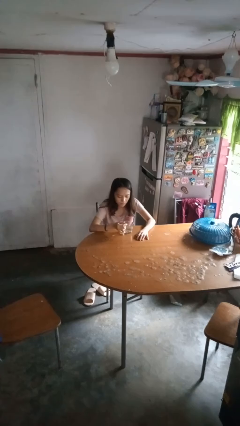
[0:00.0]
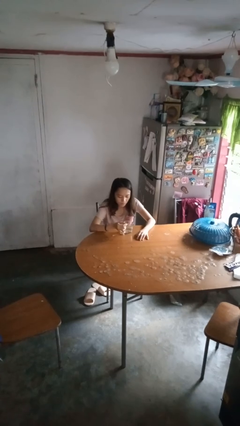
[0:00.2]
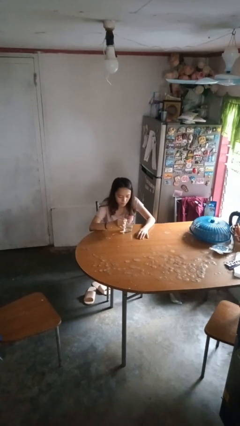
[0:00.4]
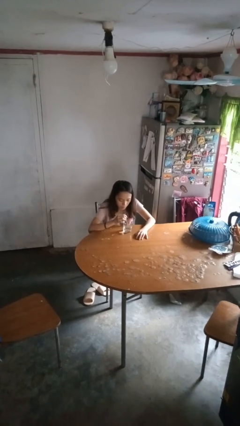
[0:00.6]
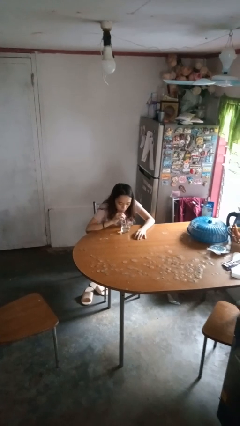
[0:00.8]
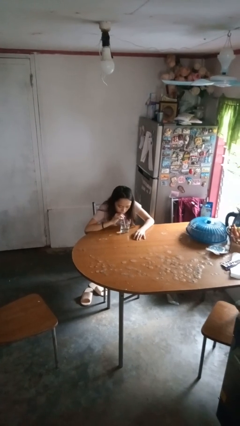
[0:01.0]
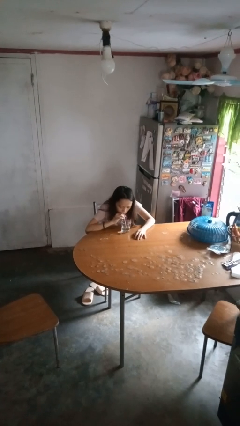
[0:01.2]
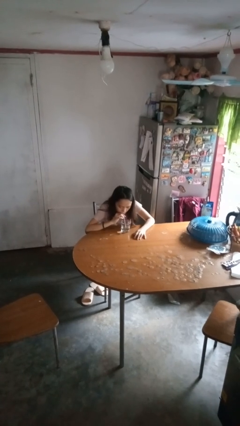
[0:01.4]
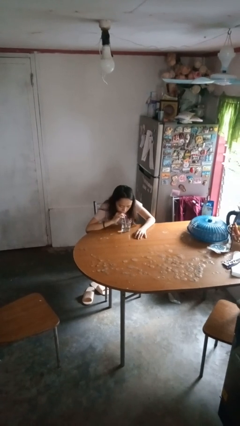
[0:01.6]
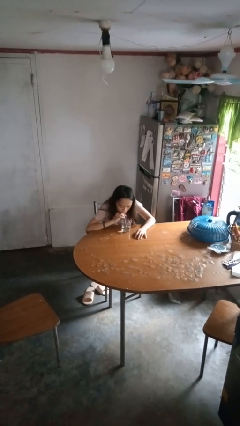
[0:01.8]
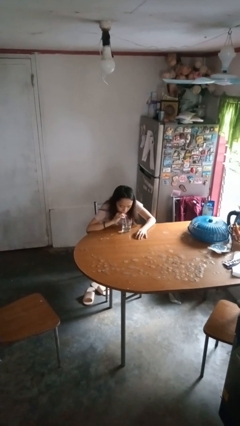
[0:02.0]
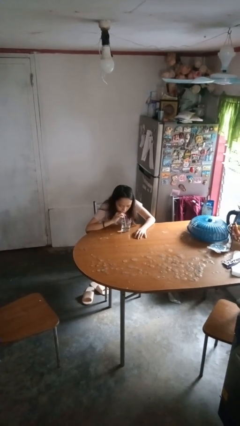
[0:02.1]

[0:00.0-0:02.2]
person drinks from straw

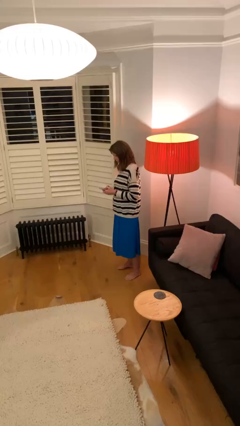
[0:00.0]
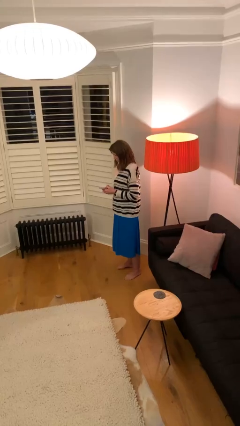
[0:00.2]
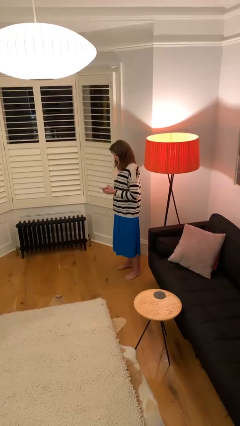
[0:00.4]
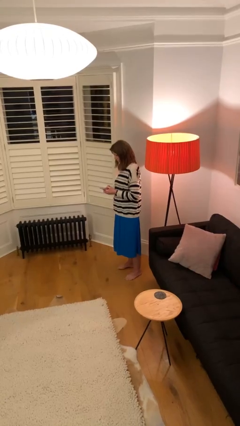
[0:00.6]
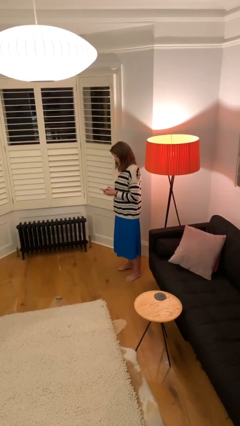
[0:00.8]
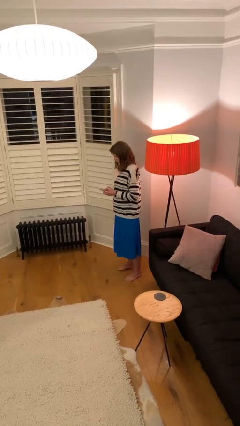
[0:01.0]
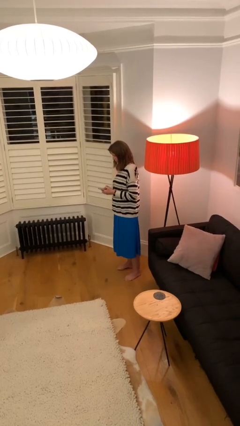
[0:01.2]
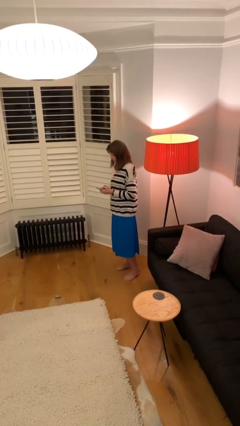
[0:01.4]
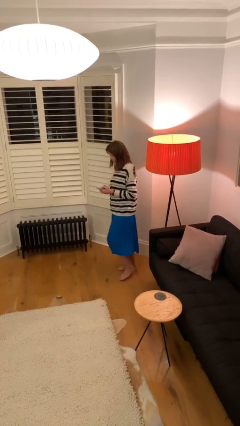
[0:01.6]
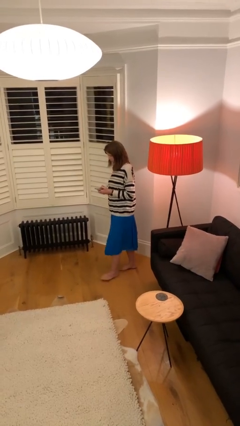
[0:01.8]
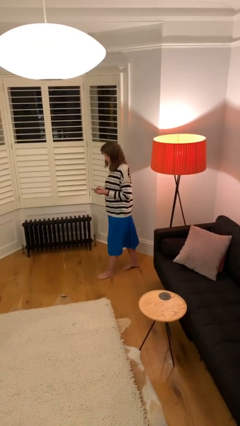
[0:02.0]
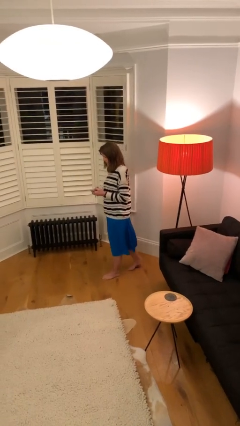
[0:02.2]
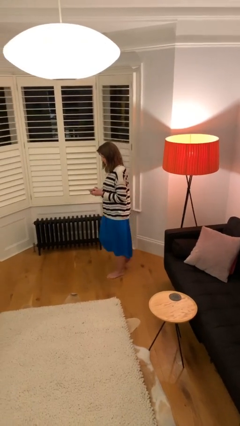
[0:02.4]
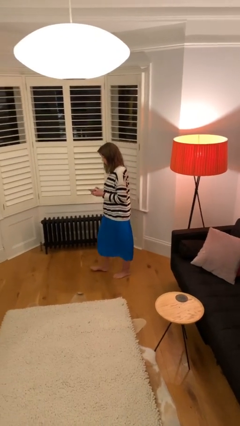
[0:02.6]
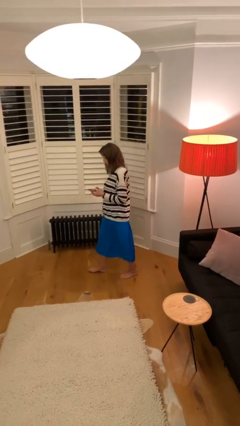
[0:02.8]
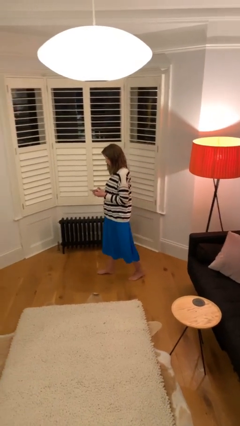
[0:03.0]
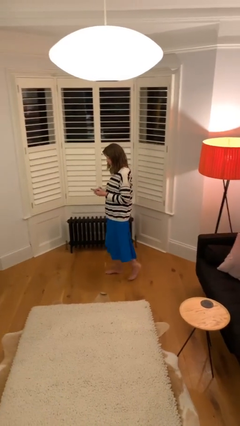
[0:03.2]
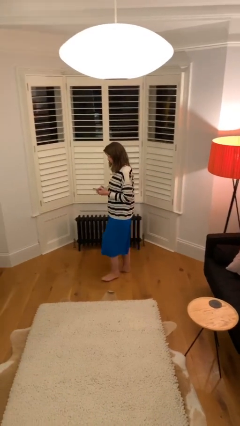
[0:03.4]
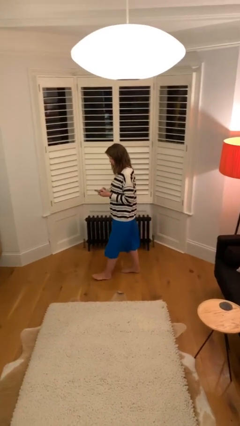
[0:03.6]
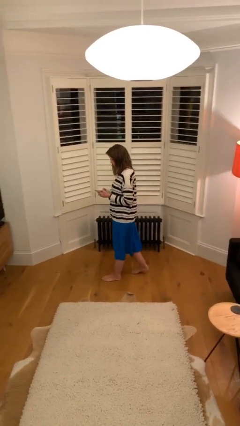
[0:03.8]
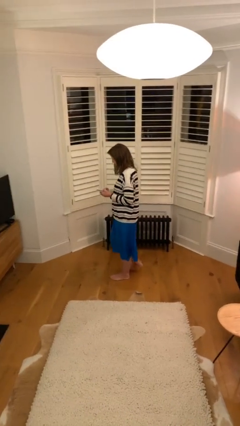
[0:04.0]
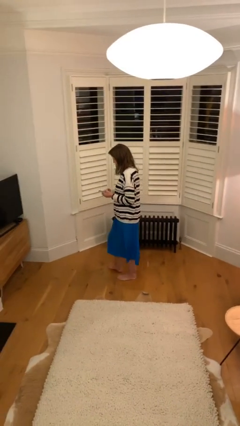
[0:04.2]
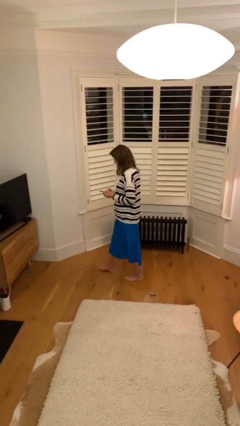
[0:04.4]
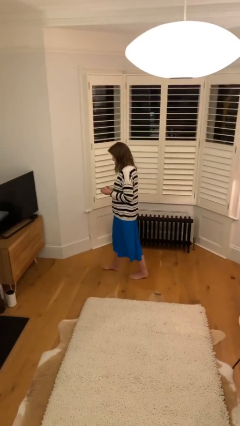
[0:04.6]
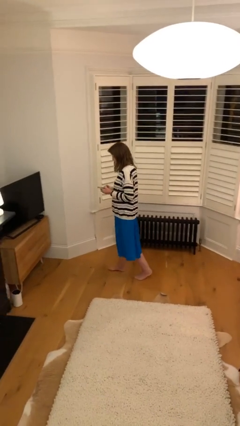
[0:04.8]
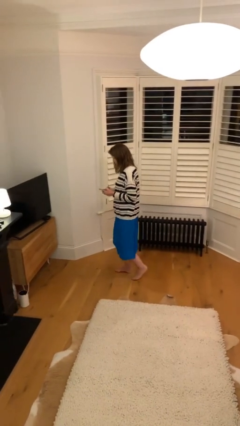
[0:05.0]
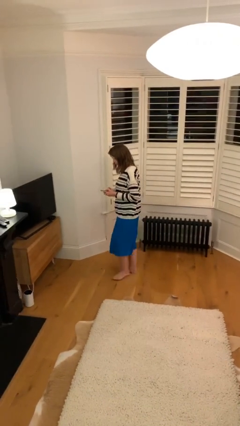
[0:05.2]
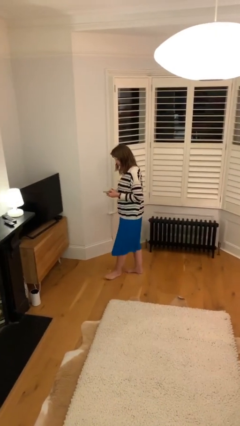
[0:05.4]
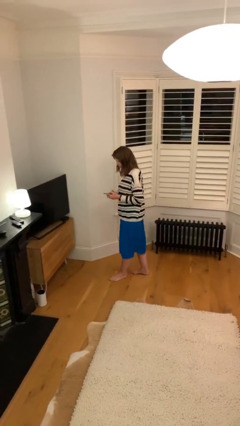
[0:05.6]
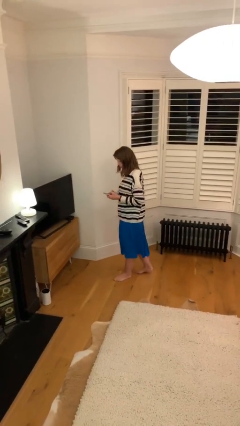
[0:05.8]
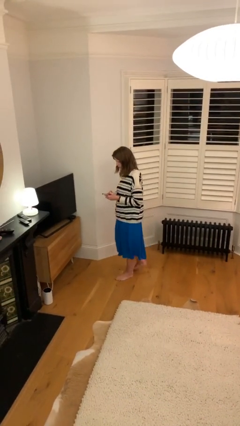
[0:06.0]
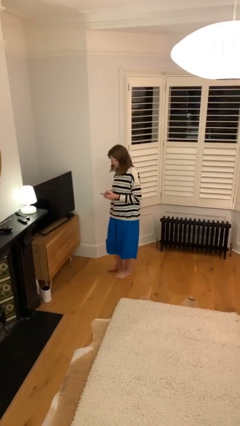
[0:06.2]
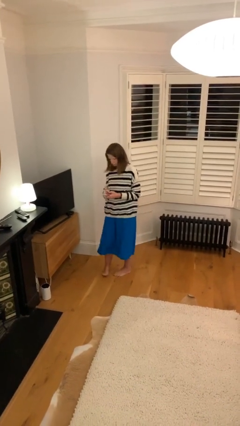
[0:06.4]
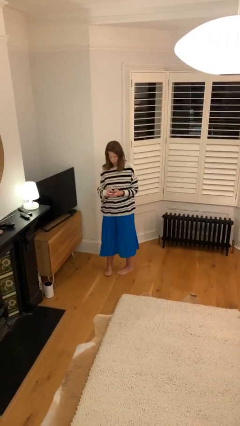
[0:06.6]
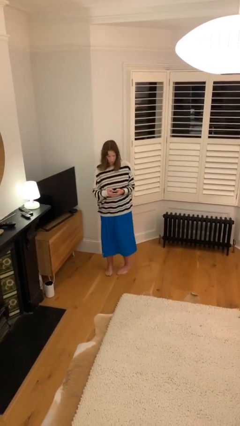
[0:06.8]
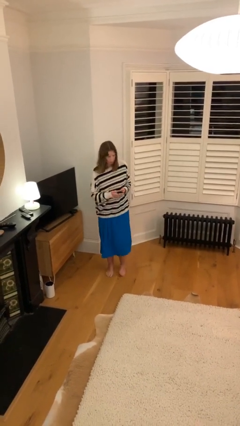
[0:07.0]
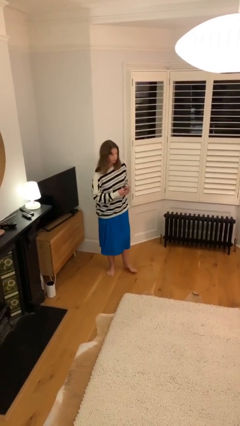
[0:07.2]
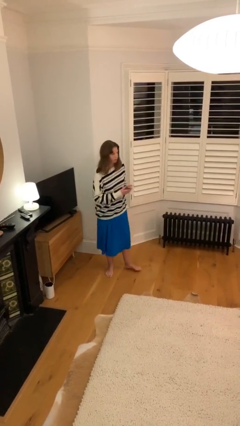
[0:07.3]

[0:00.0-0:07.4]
person texts on phone

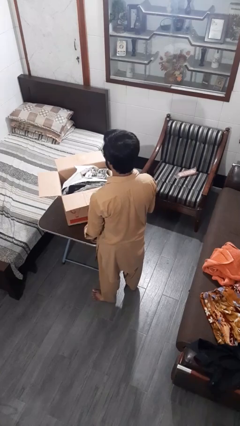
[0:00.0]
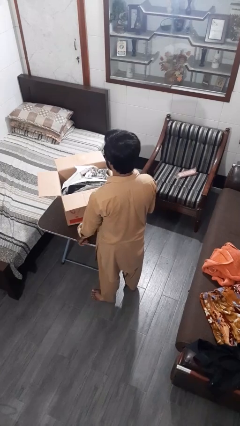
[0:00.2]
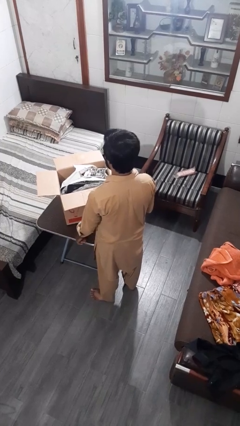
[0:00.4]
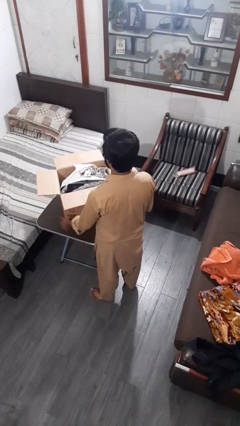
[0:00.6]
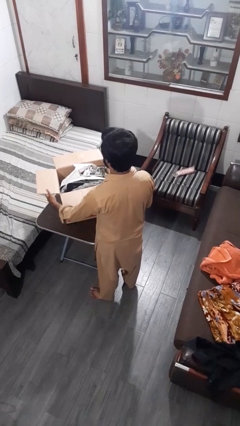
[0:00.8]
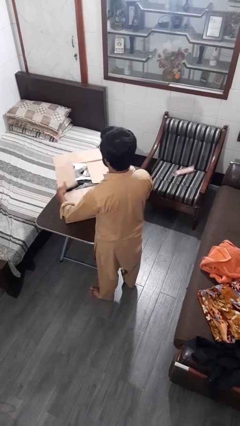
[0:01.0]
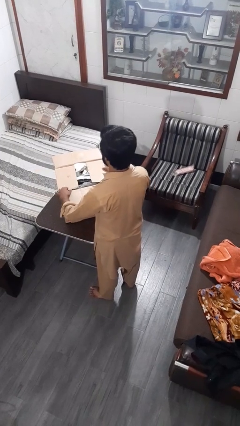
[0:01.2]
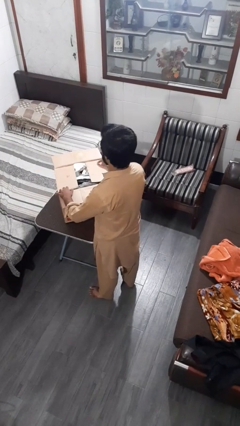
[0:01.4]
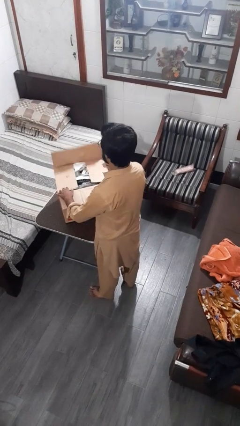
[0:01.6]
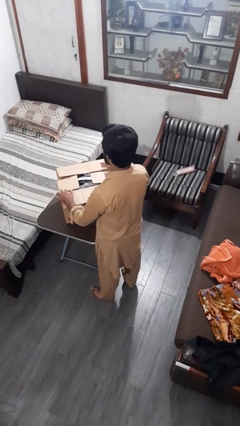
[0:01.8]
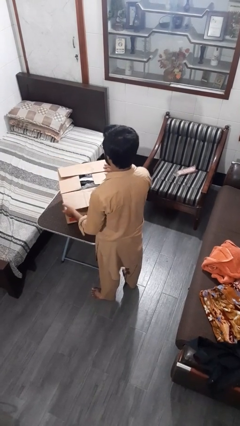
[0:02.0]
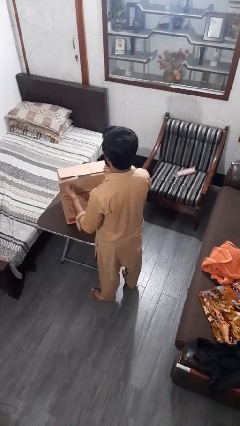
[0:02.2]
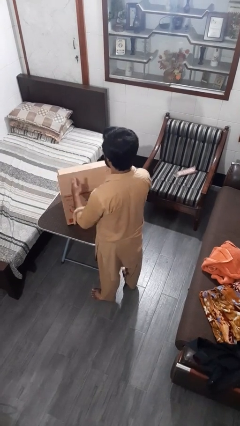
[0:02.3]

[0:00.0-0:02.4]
person closes box

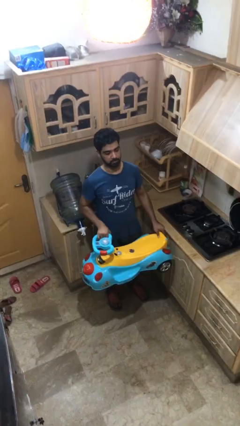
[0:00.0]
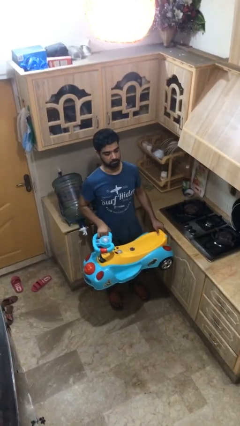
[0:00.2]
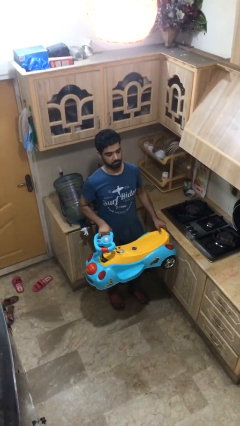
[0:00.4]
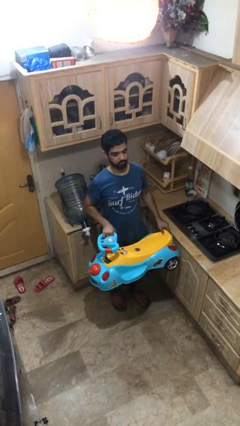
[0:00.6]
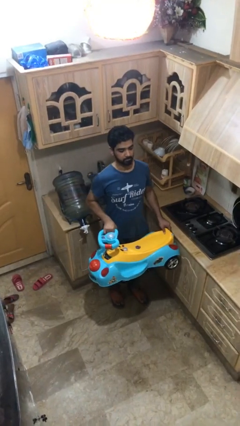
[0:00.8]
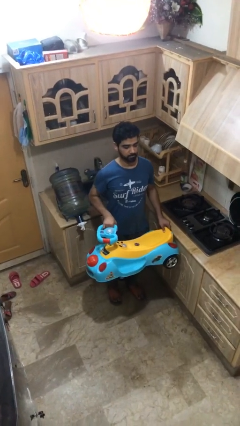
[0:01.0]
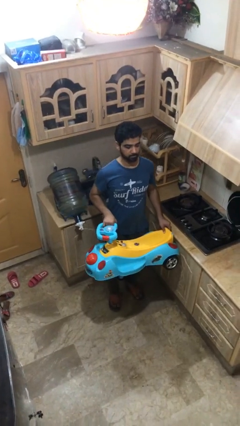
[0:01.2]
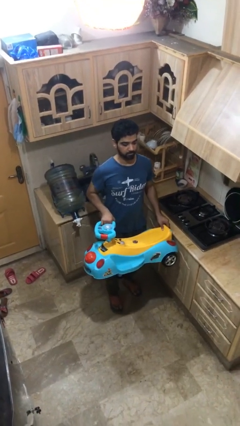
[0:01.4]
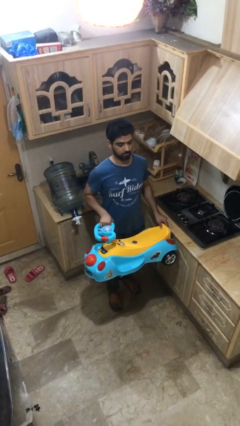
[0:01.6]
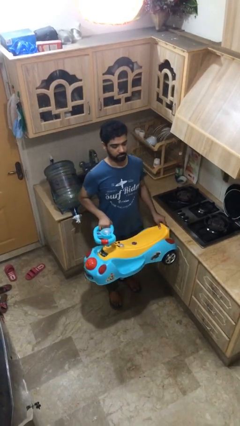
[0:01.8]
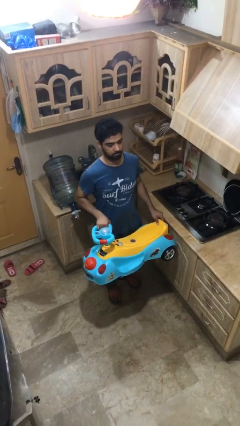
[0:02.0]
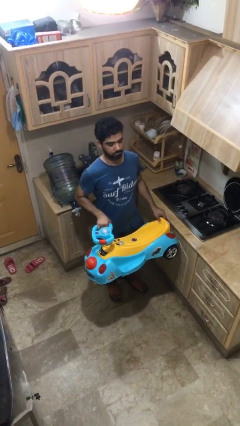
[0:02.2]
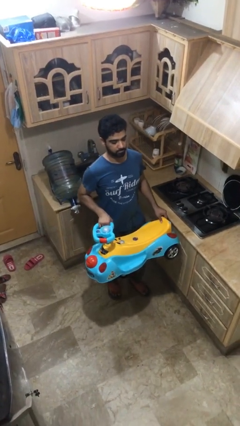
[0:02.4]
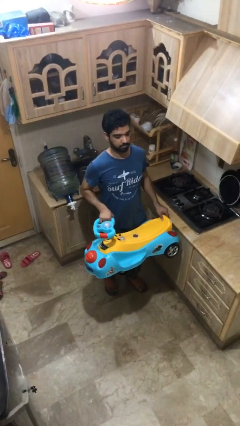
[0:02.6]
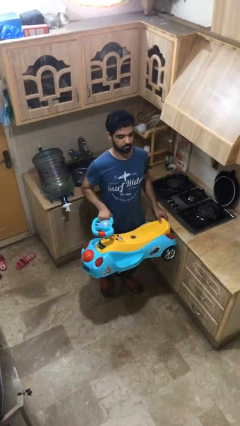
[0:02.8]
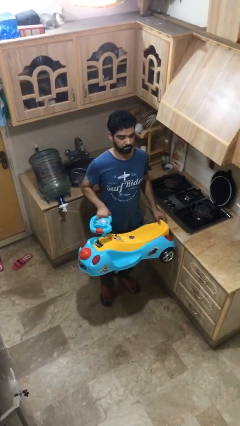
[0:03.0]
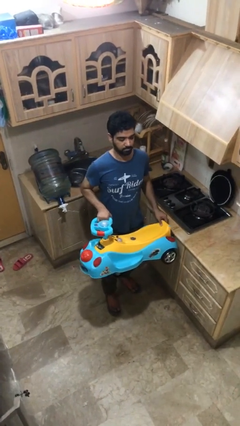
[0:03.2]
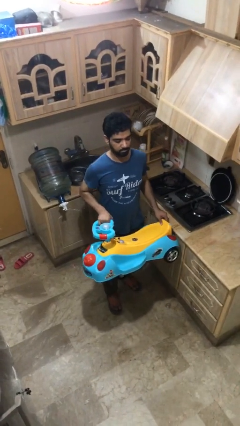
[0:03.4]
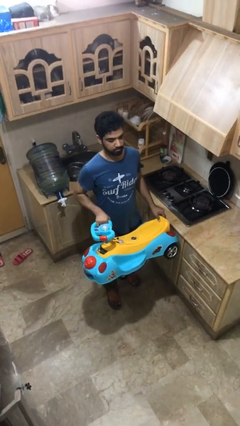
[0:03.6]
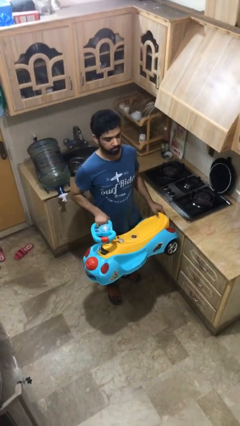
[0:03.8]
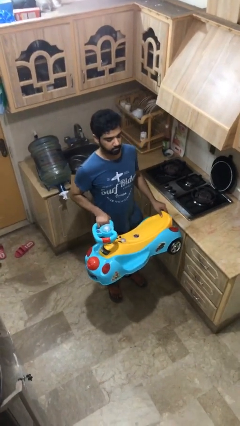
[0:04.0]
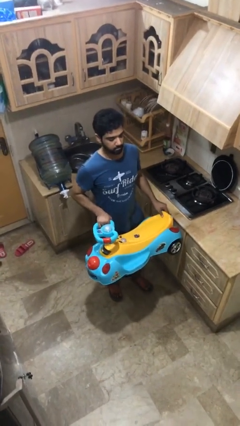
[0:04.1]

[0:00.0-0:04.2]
person carries heavy object

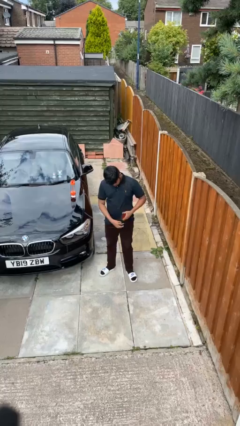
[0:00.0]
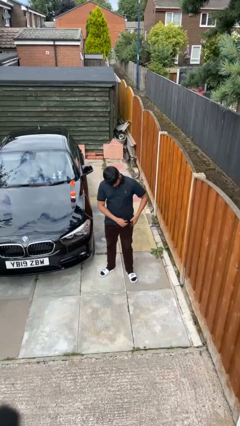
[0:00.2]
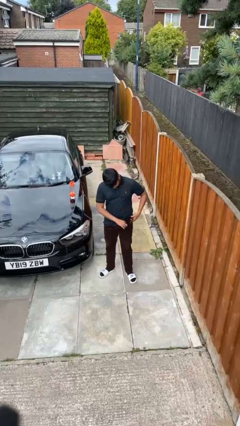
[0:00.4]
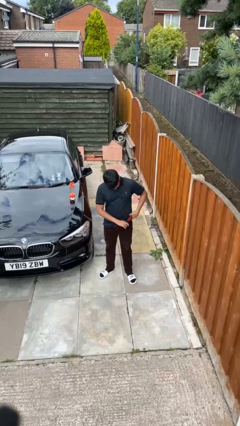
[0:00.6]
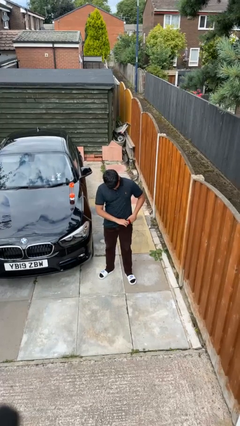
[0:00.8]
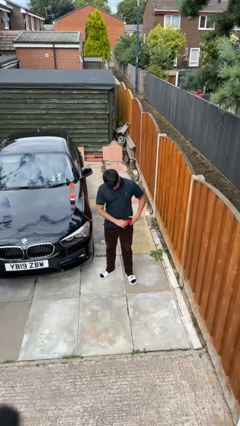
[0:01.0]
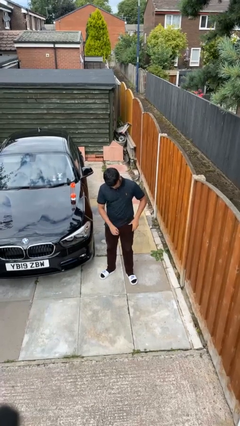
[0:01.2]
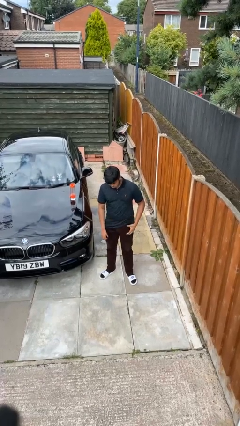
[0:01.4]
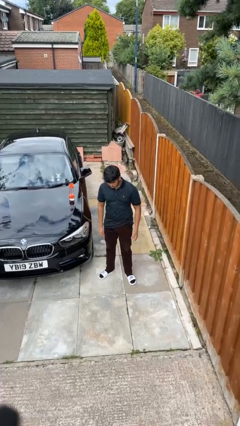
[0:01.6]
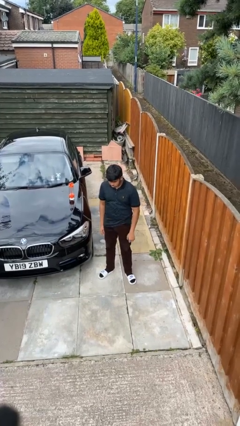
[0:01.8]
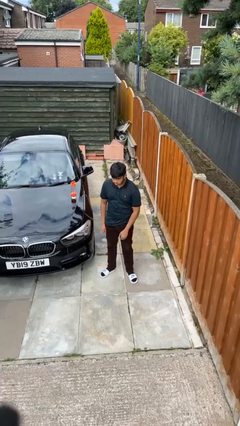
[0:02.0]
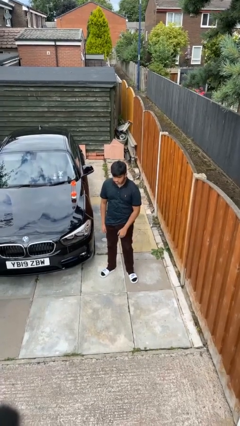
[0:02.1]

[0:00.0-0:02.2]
person puts phone into pocket
